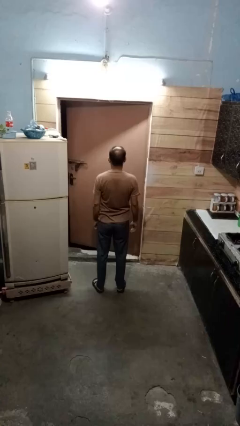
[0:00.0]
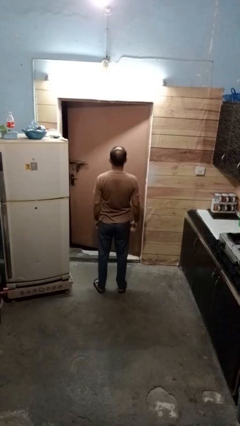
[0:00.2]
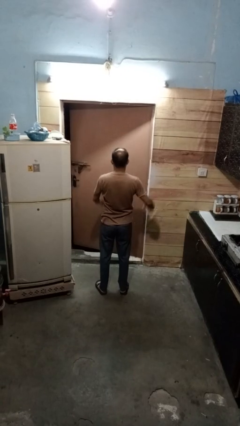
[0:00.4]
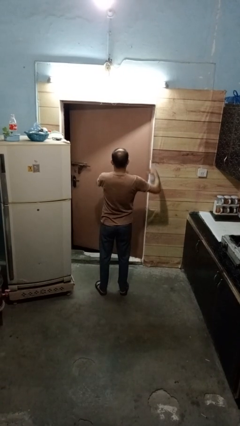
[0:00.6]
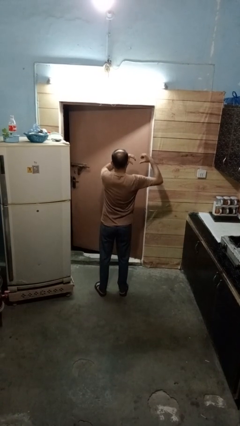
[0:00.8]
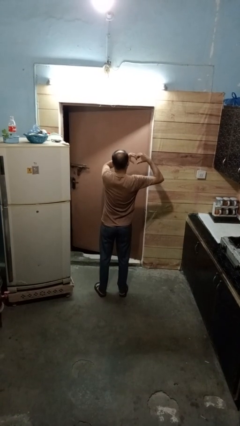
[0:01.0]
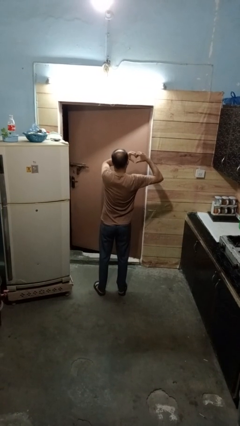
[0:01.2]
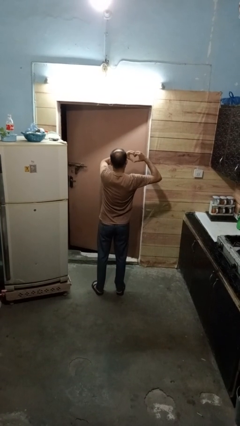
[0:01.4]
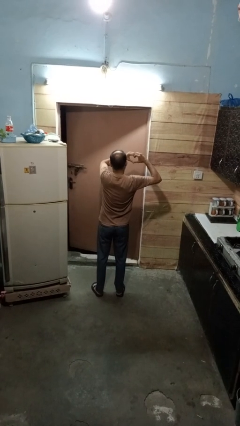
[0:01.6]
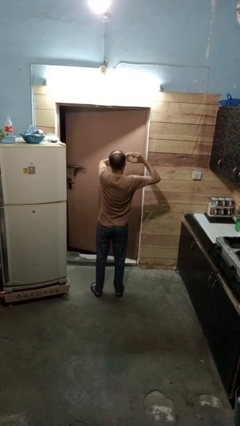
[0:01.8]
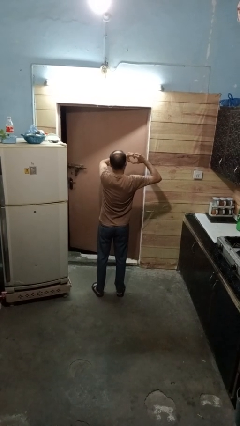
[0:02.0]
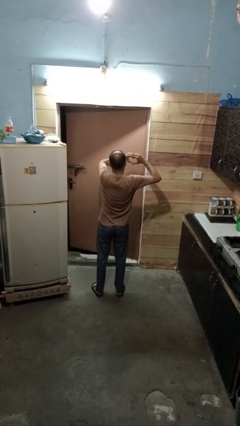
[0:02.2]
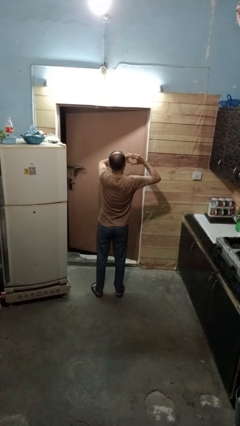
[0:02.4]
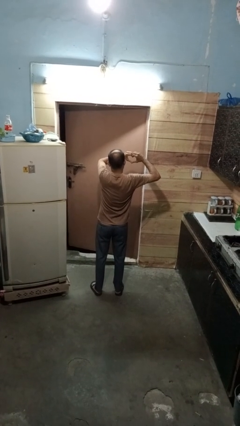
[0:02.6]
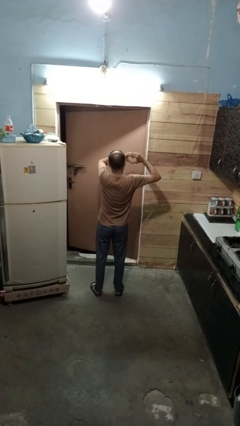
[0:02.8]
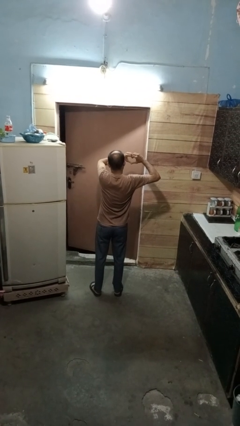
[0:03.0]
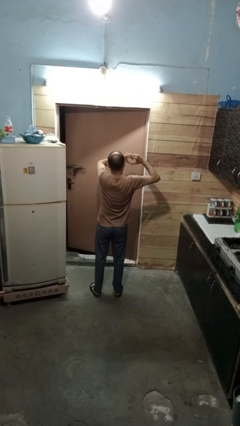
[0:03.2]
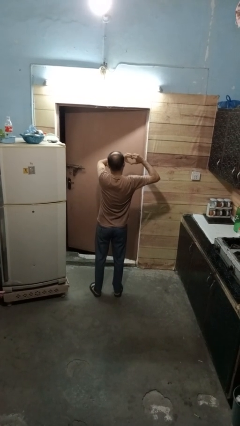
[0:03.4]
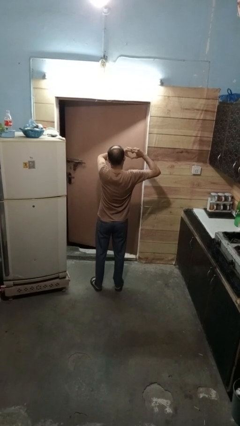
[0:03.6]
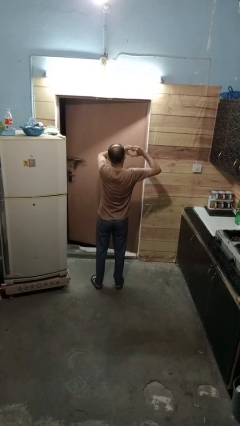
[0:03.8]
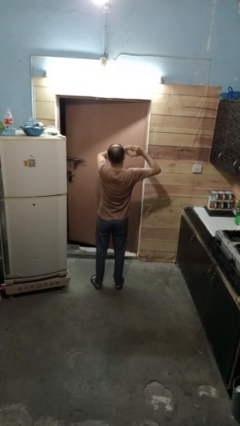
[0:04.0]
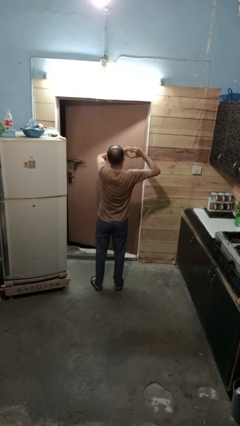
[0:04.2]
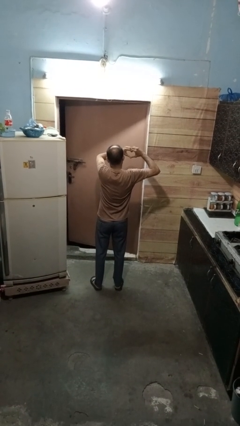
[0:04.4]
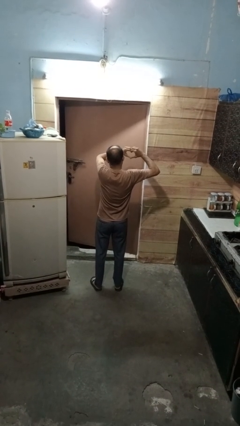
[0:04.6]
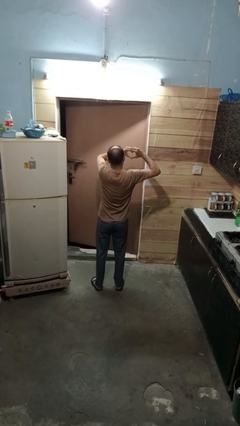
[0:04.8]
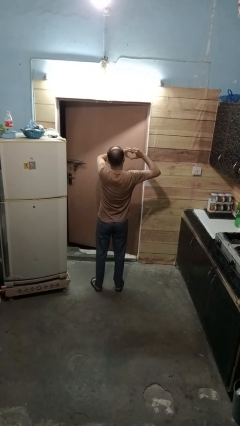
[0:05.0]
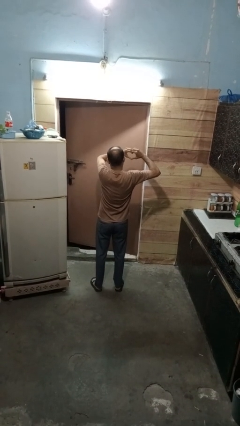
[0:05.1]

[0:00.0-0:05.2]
person gestures heart

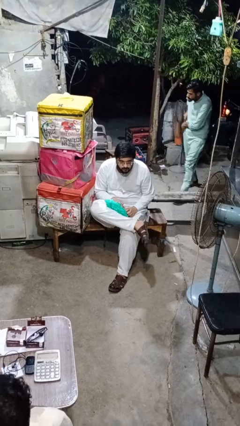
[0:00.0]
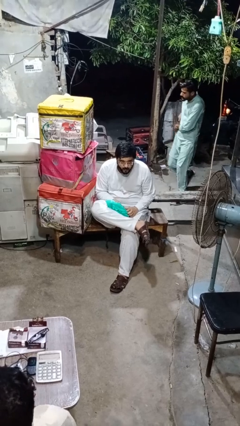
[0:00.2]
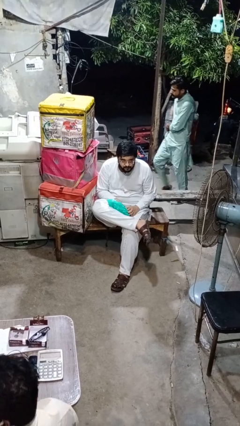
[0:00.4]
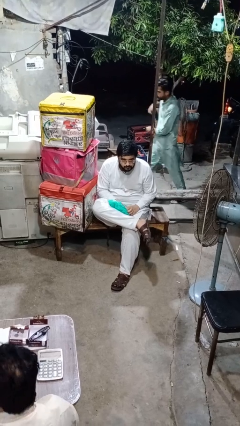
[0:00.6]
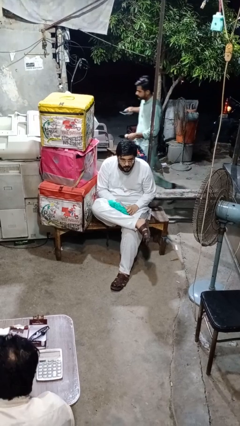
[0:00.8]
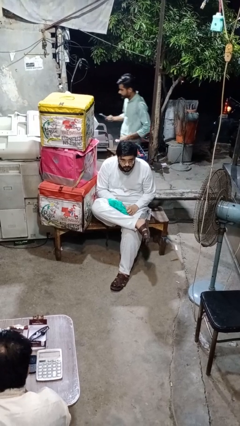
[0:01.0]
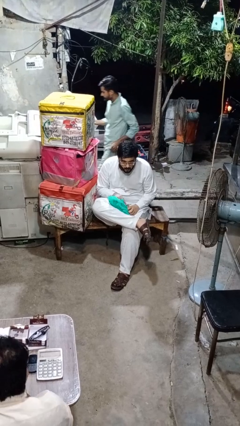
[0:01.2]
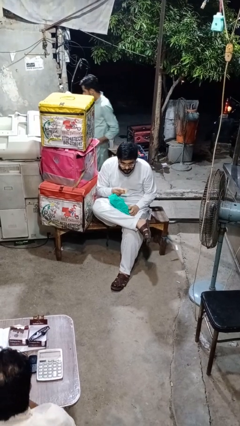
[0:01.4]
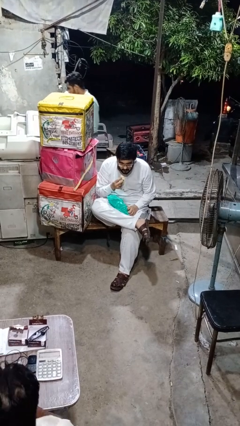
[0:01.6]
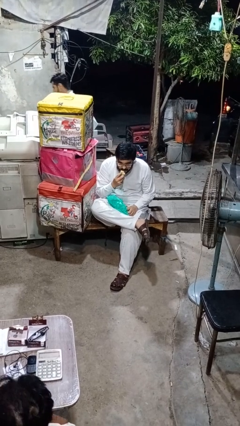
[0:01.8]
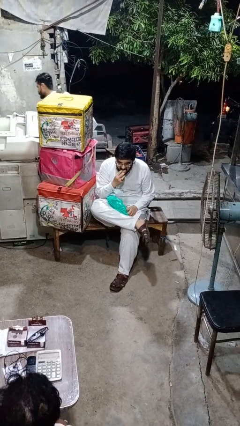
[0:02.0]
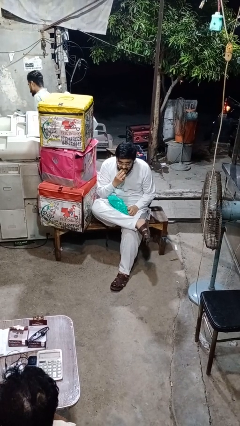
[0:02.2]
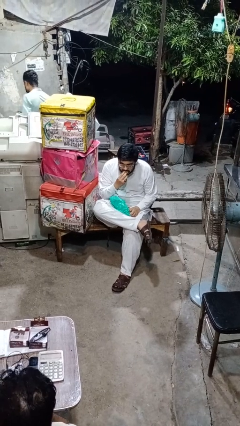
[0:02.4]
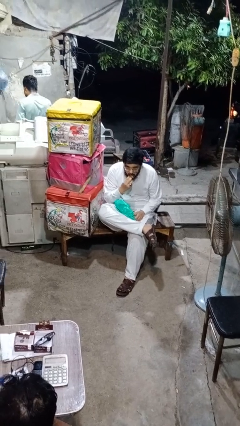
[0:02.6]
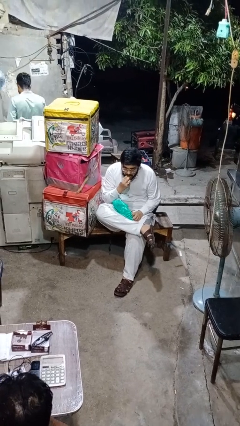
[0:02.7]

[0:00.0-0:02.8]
person eats snack from bag

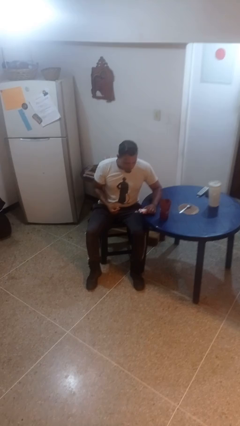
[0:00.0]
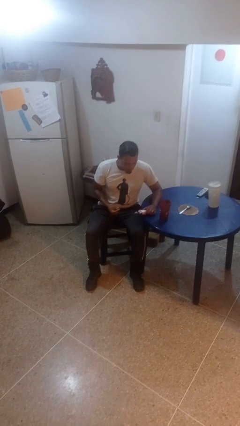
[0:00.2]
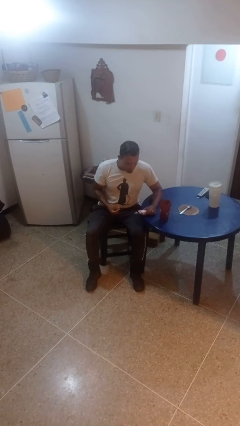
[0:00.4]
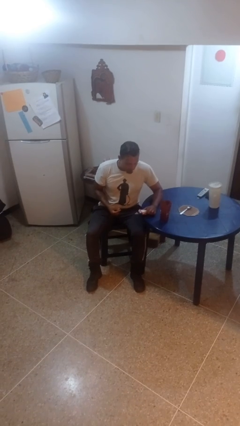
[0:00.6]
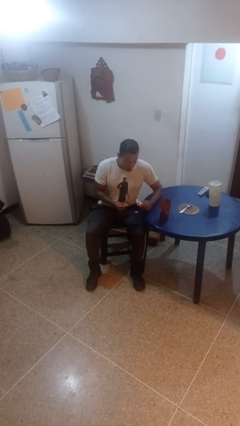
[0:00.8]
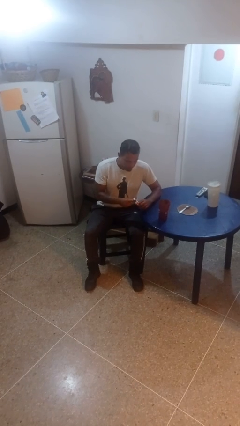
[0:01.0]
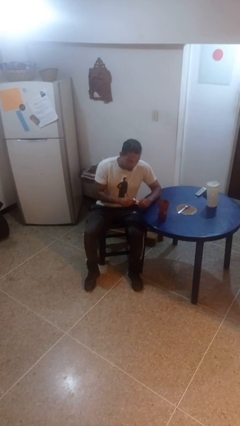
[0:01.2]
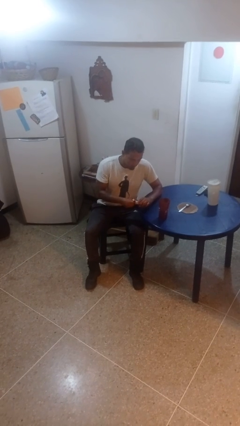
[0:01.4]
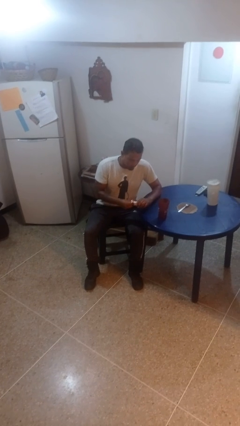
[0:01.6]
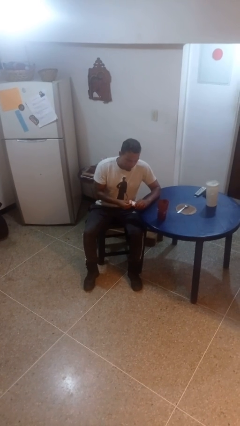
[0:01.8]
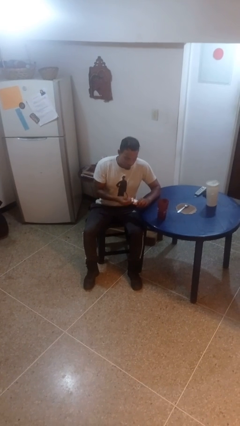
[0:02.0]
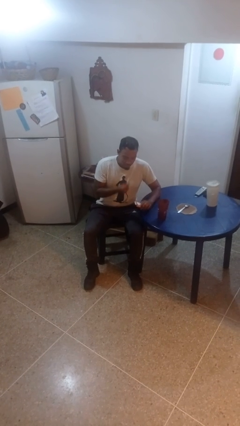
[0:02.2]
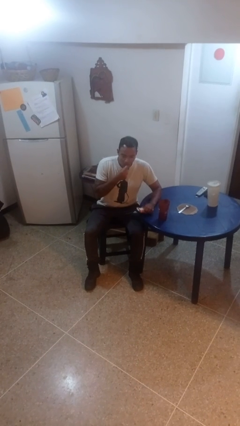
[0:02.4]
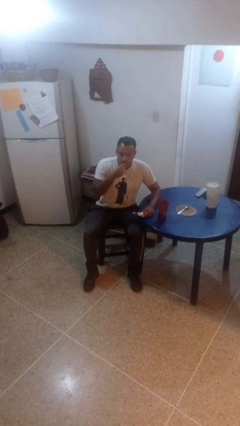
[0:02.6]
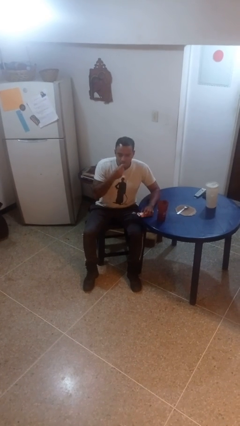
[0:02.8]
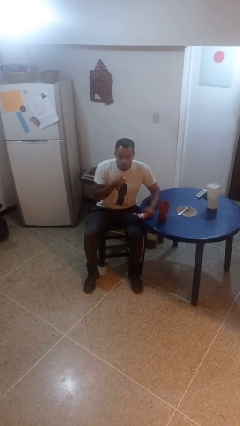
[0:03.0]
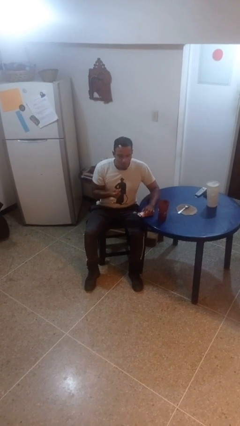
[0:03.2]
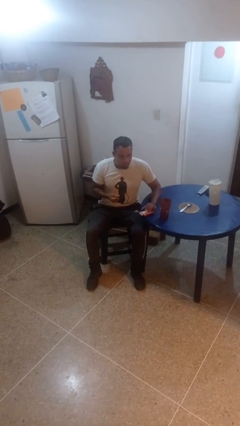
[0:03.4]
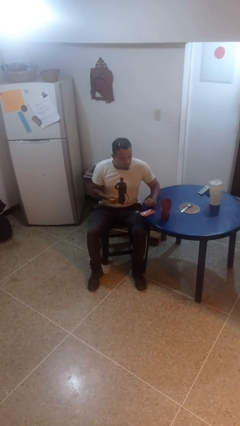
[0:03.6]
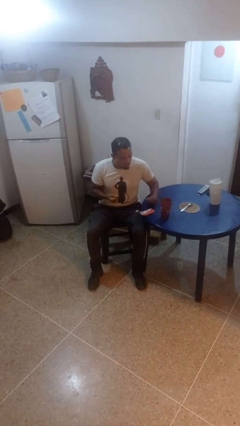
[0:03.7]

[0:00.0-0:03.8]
person takes medicine pills

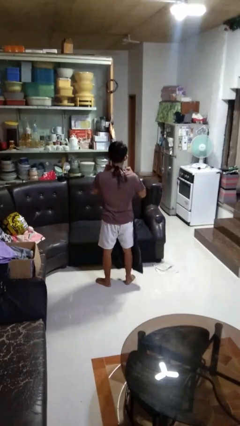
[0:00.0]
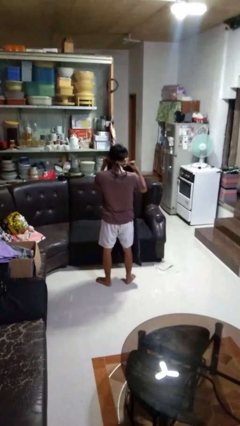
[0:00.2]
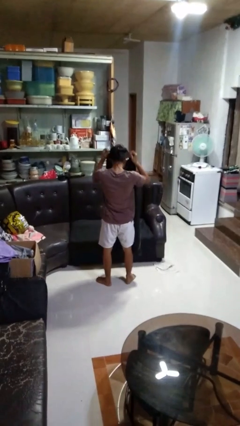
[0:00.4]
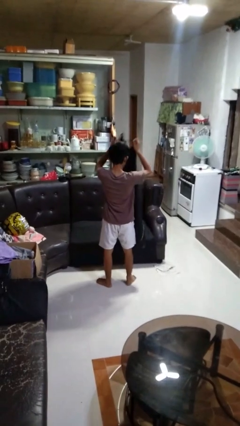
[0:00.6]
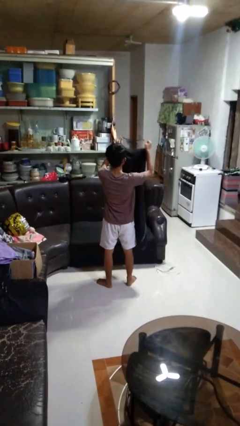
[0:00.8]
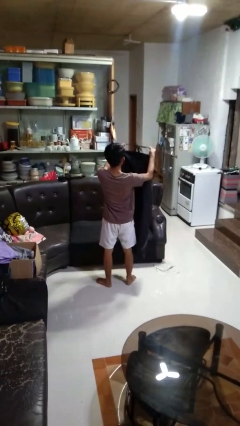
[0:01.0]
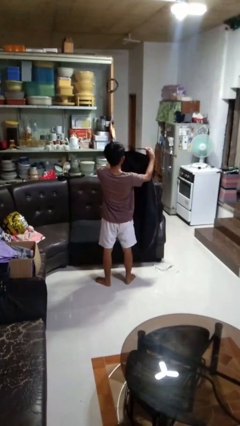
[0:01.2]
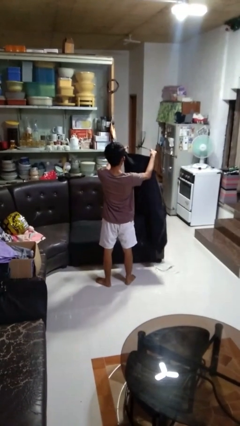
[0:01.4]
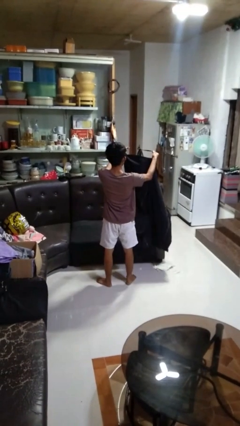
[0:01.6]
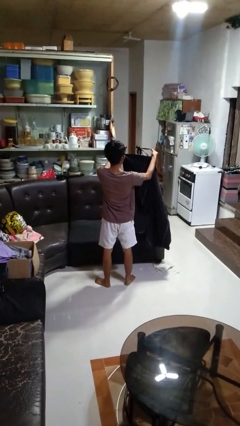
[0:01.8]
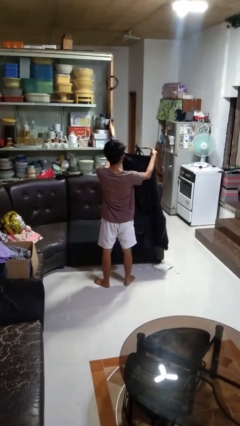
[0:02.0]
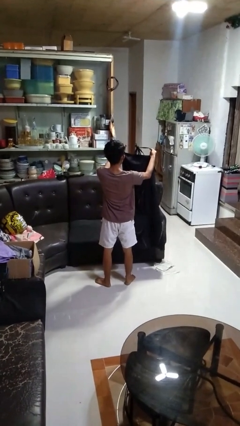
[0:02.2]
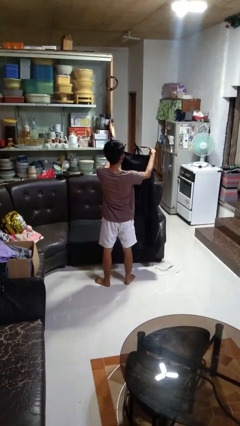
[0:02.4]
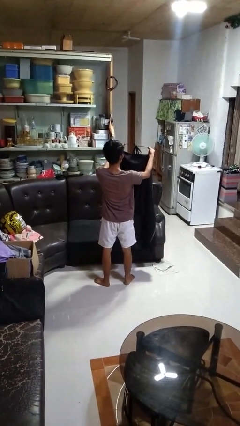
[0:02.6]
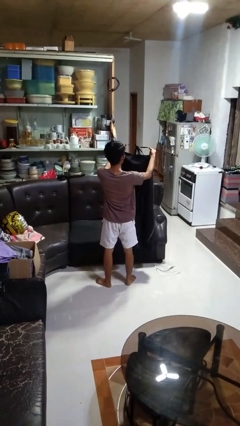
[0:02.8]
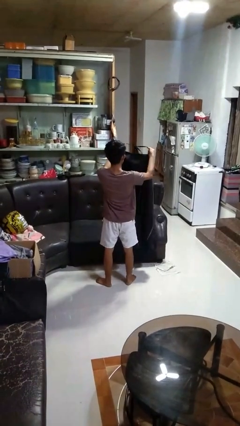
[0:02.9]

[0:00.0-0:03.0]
person takes off apron

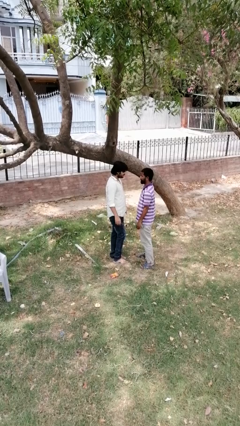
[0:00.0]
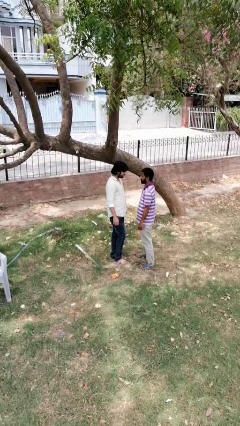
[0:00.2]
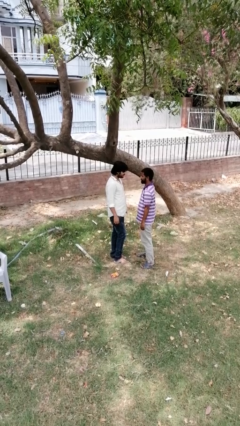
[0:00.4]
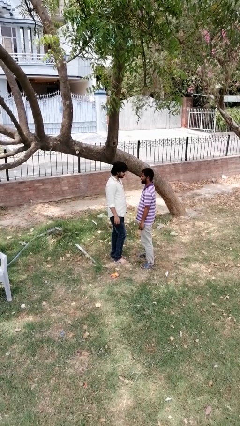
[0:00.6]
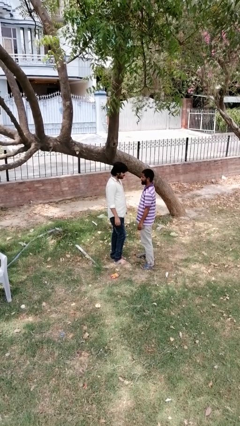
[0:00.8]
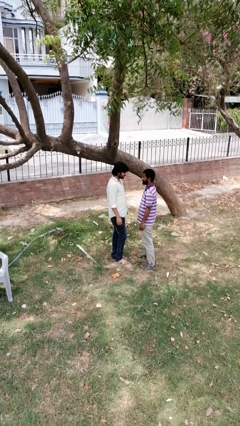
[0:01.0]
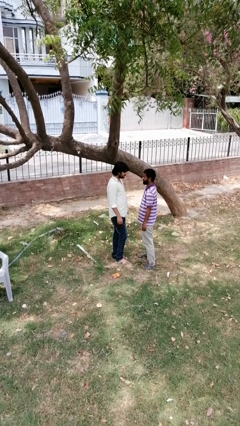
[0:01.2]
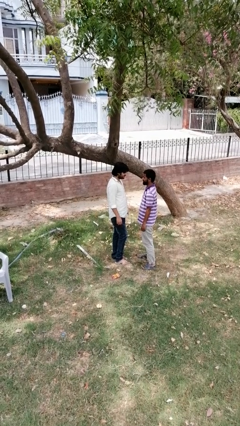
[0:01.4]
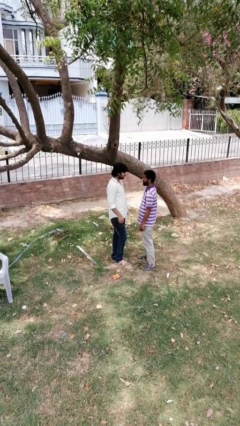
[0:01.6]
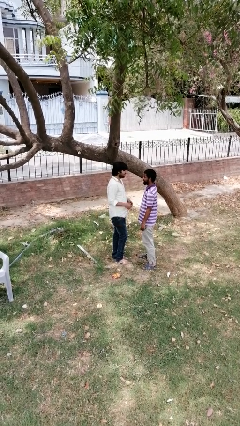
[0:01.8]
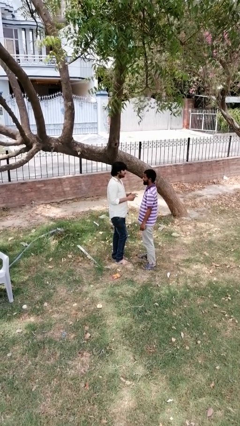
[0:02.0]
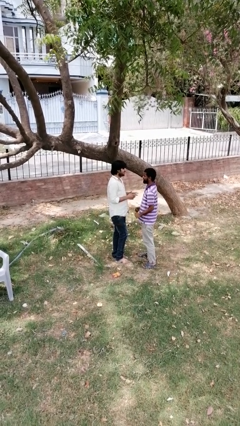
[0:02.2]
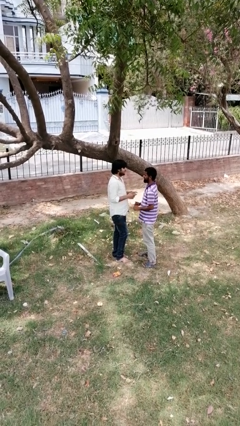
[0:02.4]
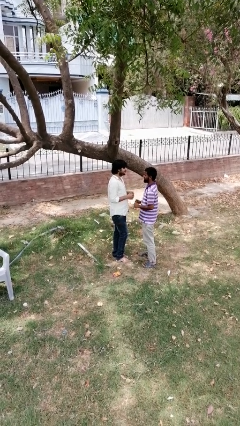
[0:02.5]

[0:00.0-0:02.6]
person highfives hand

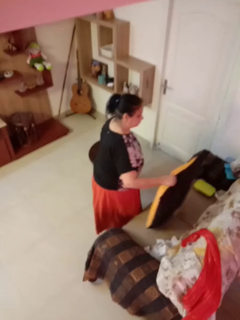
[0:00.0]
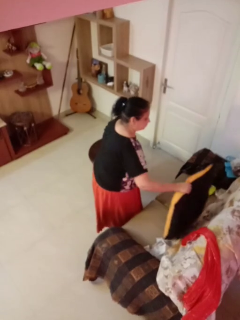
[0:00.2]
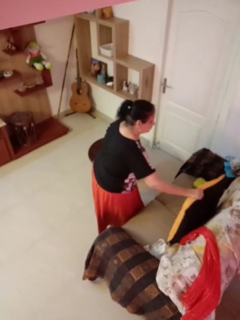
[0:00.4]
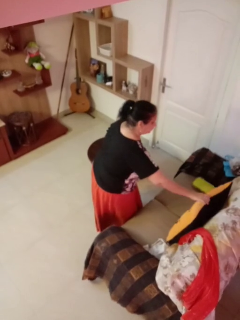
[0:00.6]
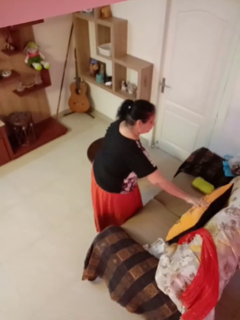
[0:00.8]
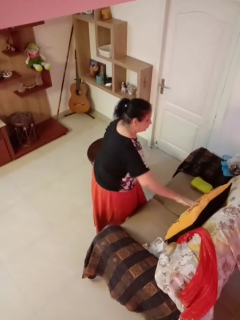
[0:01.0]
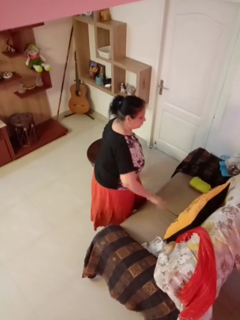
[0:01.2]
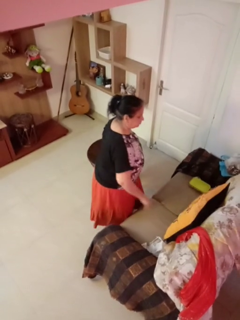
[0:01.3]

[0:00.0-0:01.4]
person puts down object on couch
